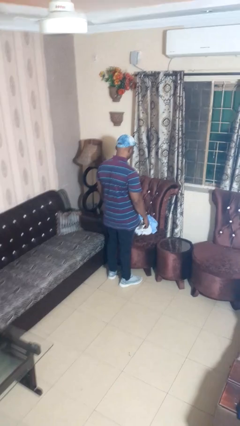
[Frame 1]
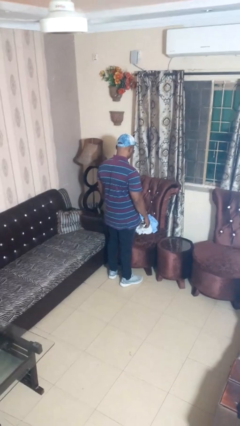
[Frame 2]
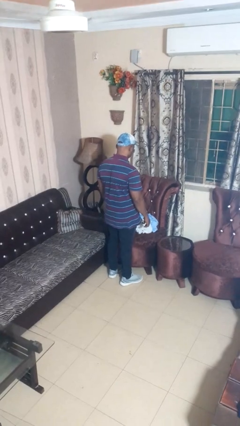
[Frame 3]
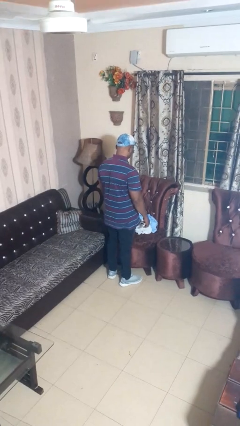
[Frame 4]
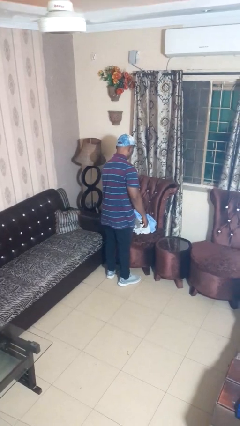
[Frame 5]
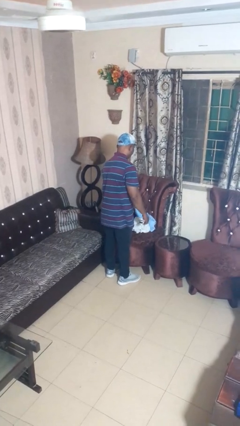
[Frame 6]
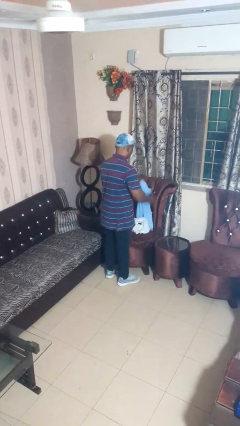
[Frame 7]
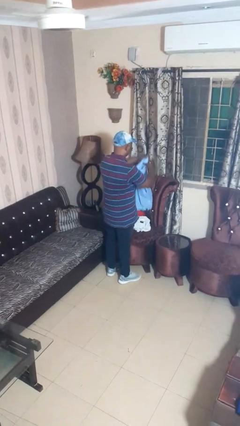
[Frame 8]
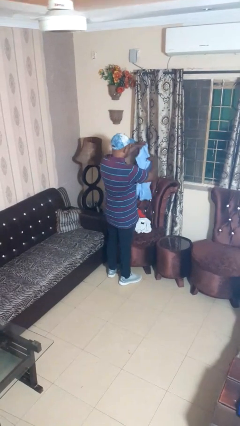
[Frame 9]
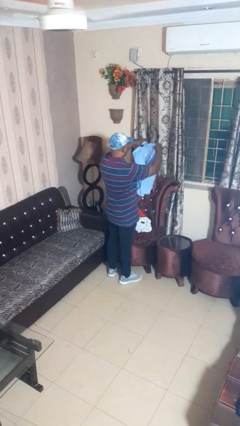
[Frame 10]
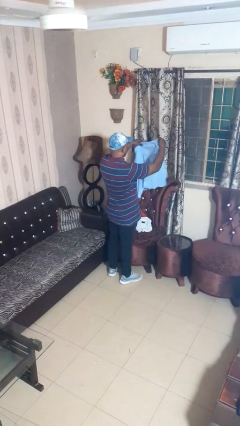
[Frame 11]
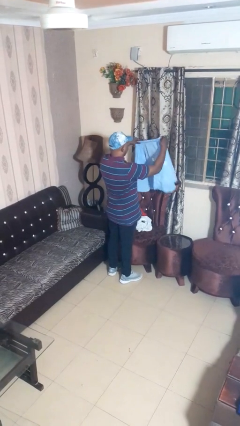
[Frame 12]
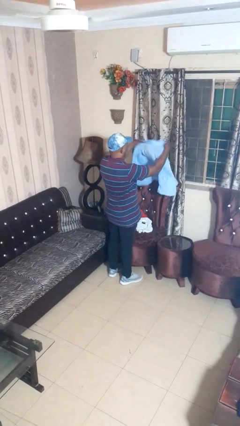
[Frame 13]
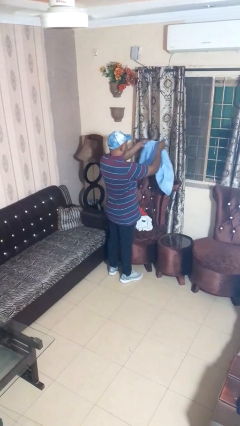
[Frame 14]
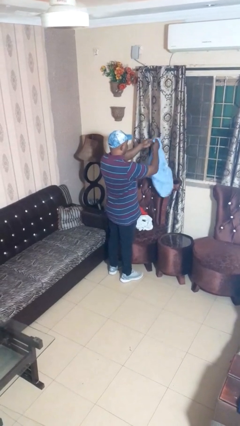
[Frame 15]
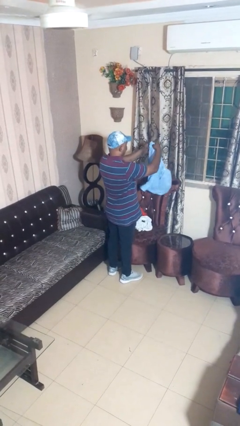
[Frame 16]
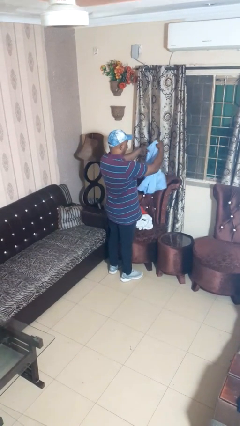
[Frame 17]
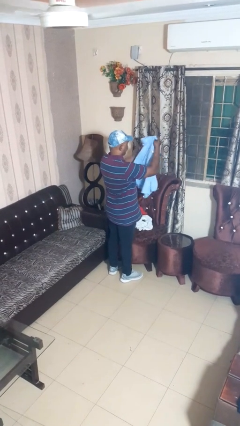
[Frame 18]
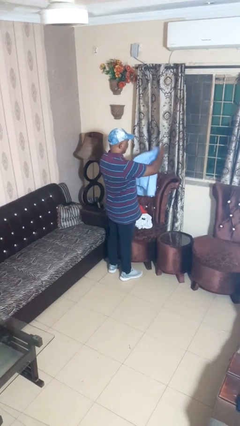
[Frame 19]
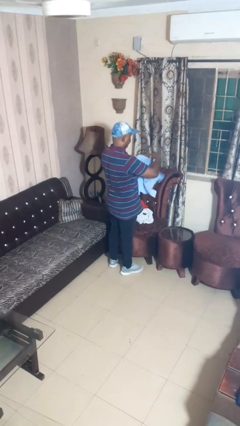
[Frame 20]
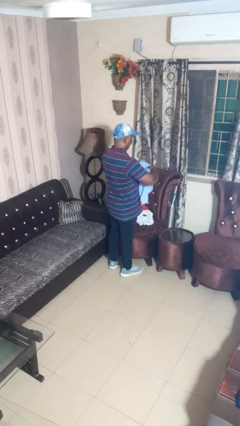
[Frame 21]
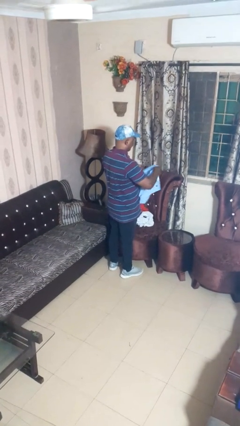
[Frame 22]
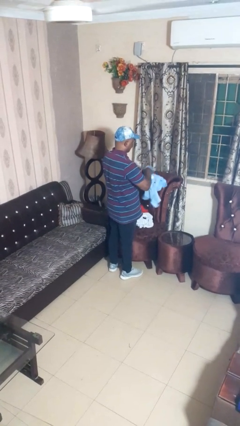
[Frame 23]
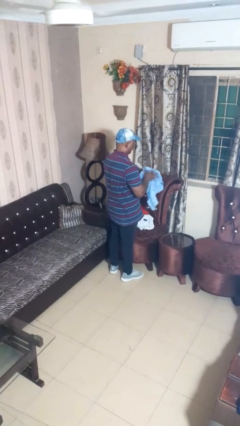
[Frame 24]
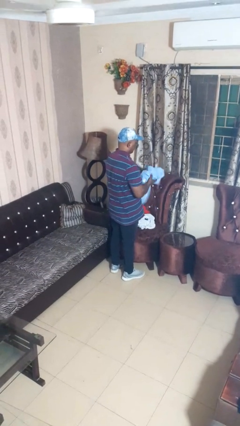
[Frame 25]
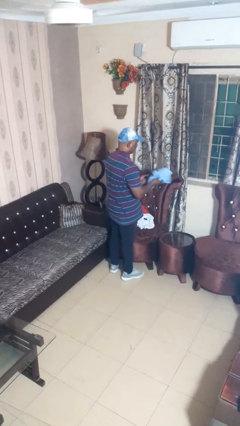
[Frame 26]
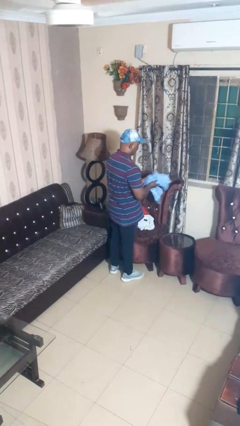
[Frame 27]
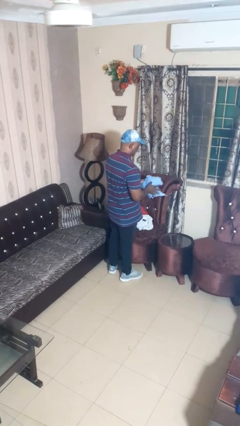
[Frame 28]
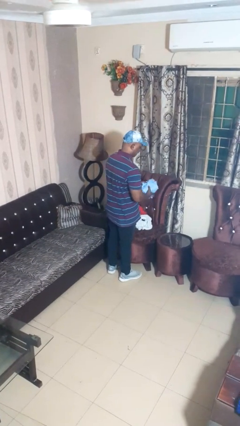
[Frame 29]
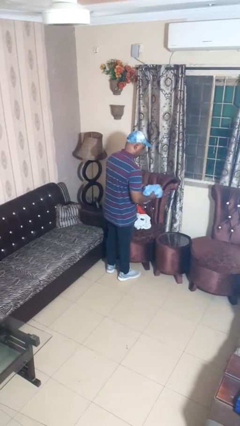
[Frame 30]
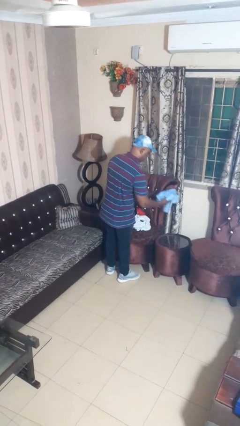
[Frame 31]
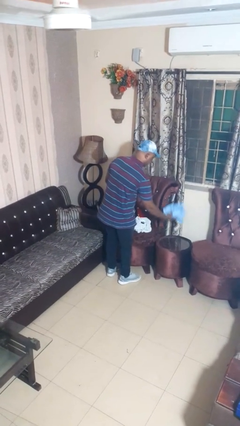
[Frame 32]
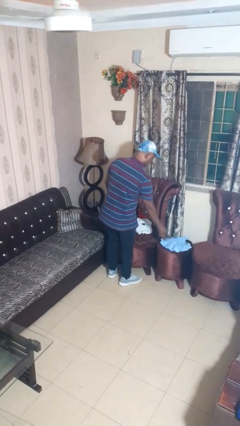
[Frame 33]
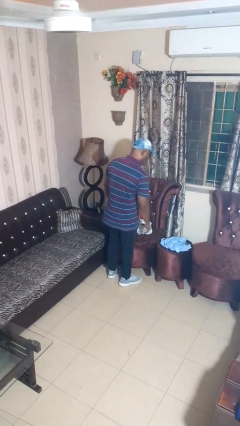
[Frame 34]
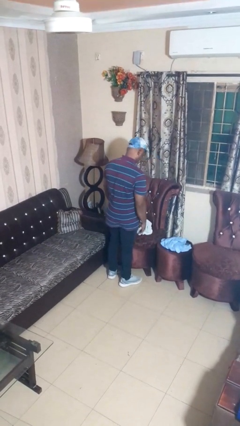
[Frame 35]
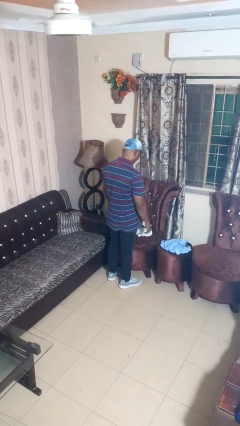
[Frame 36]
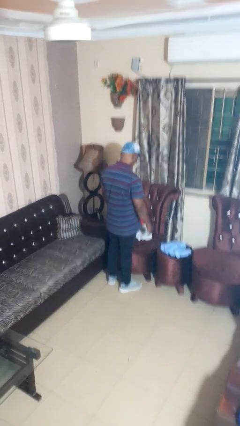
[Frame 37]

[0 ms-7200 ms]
person folds shirt

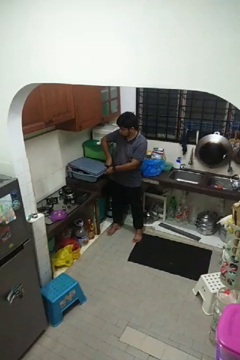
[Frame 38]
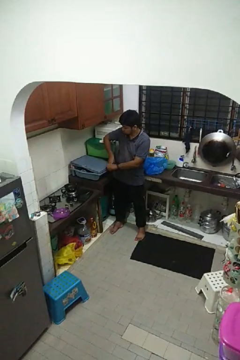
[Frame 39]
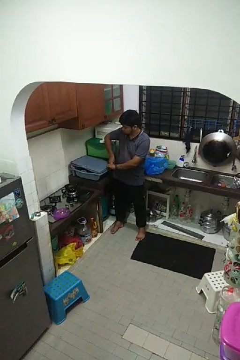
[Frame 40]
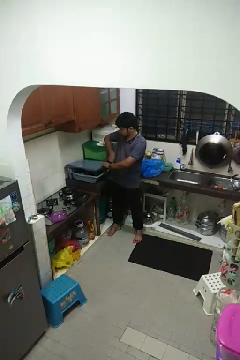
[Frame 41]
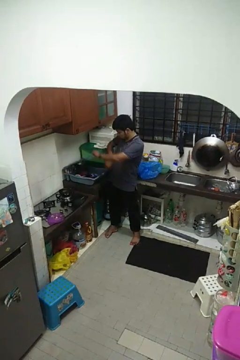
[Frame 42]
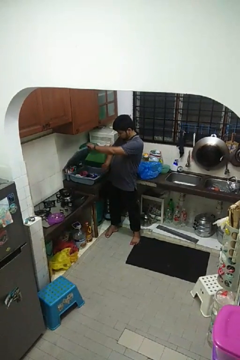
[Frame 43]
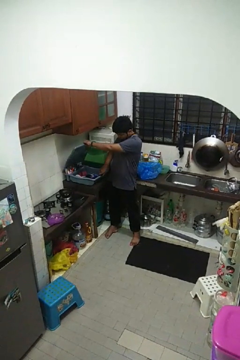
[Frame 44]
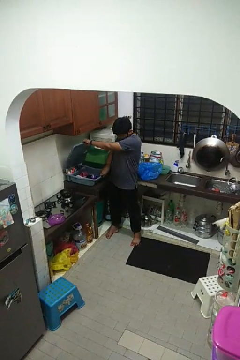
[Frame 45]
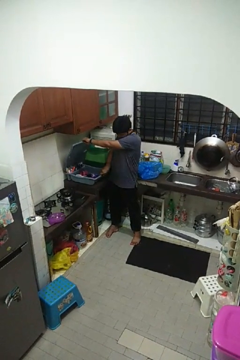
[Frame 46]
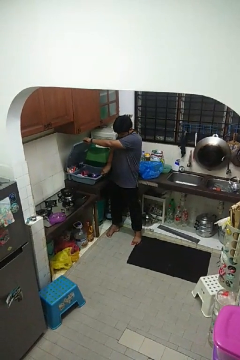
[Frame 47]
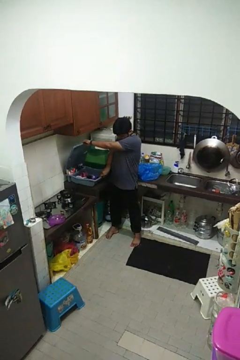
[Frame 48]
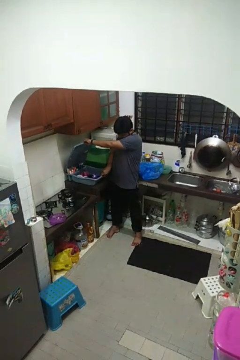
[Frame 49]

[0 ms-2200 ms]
person opens dishwasher

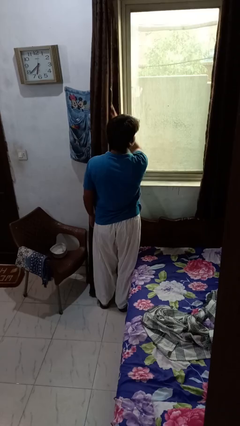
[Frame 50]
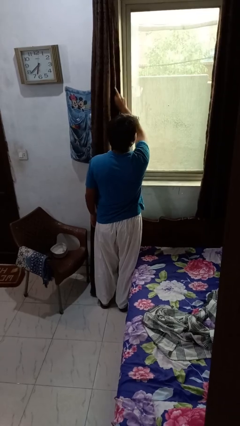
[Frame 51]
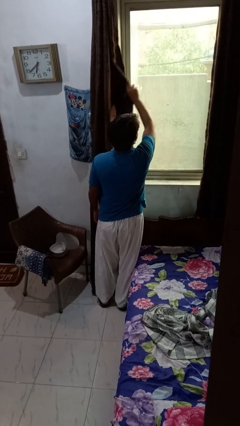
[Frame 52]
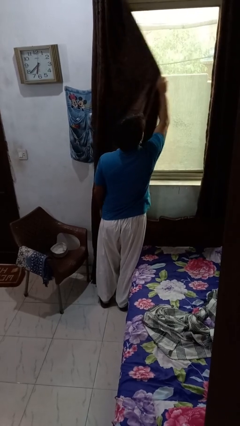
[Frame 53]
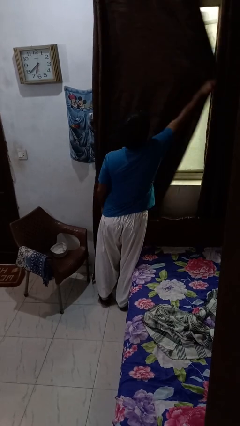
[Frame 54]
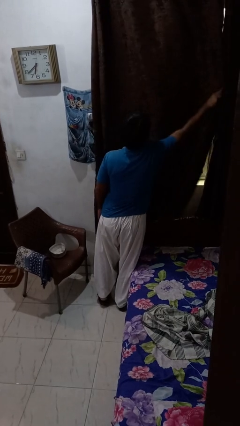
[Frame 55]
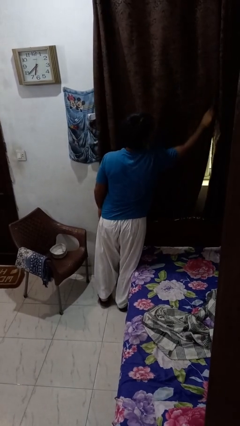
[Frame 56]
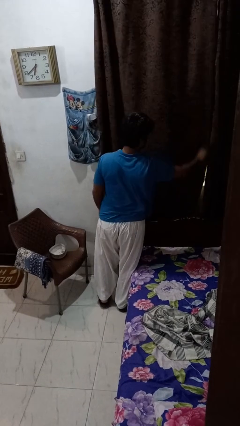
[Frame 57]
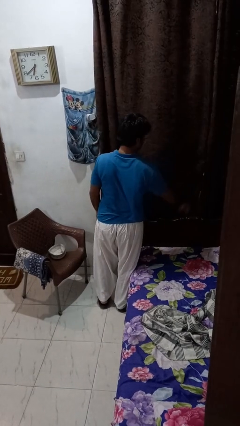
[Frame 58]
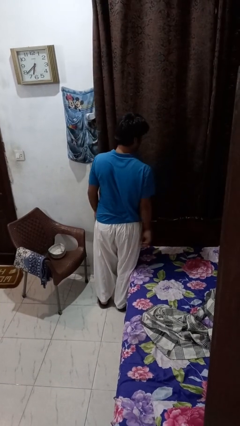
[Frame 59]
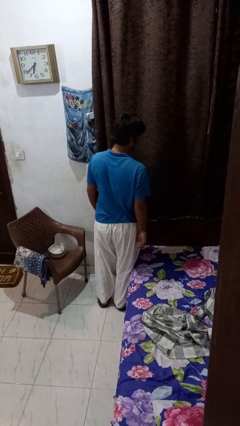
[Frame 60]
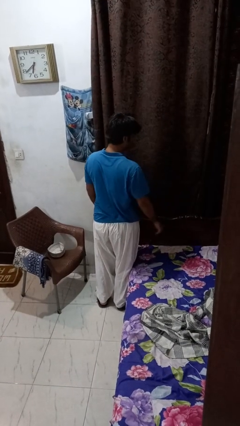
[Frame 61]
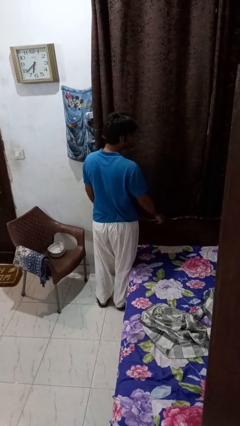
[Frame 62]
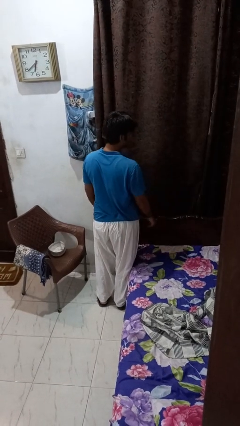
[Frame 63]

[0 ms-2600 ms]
person closes curtains

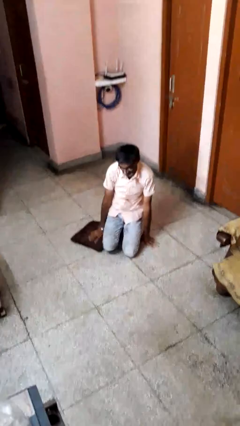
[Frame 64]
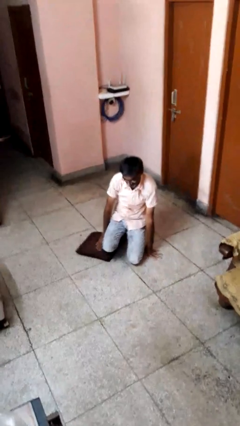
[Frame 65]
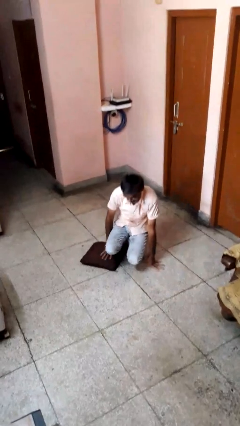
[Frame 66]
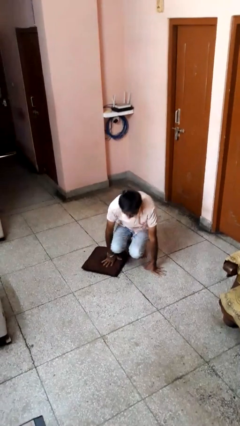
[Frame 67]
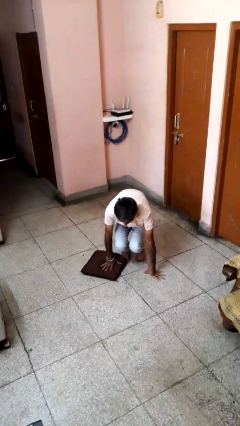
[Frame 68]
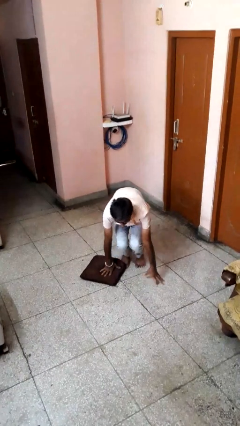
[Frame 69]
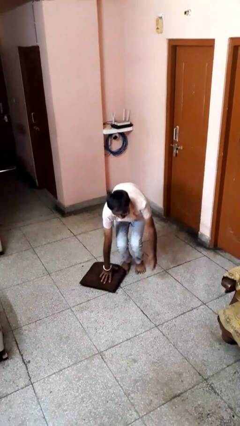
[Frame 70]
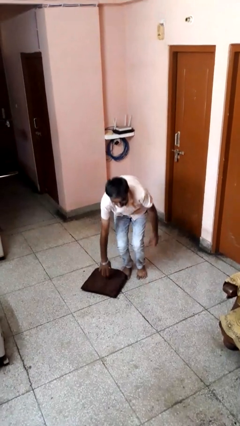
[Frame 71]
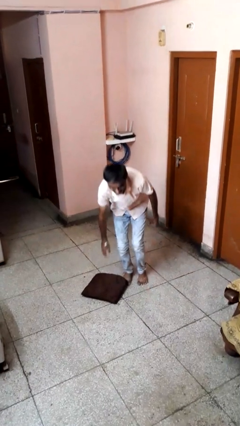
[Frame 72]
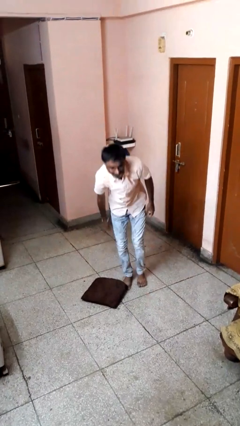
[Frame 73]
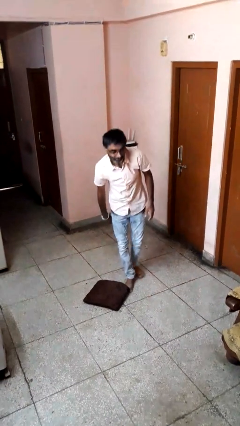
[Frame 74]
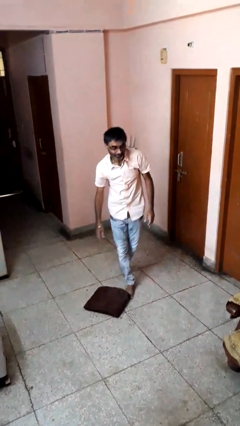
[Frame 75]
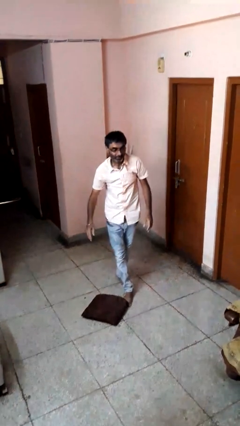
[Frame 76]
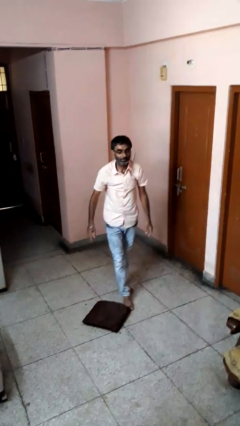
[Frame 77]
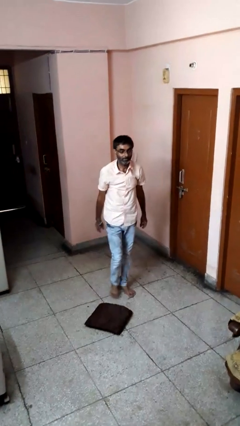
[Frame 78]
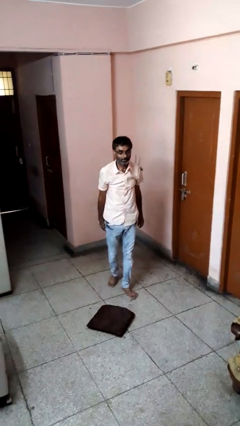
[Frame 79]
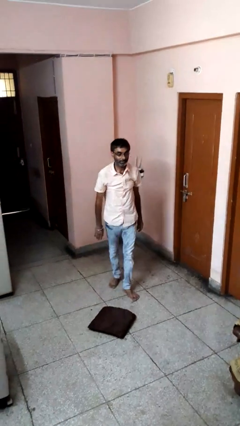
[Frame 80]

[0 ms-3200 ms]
person stands up from floor

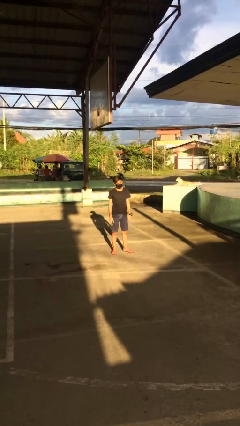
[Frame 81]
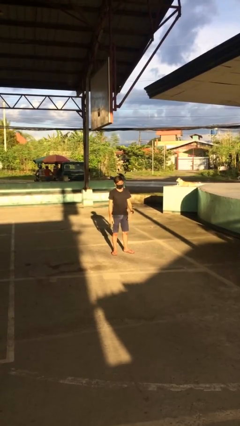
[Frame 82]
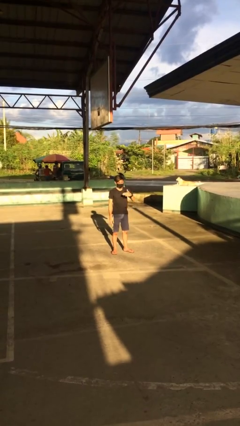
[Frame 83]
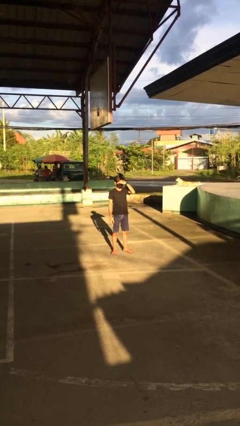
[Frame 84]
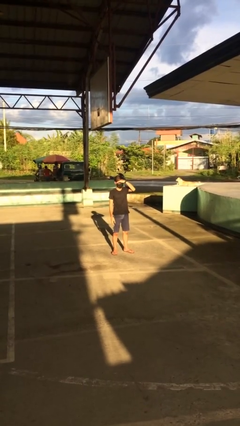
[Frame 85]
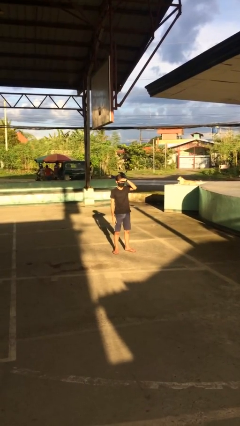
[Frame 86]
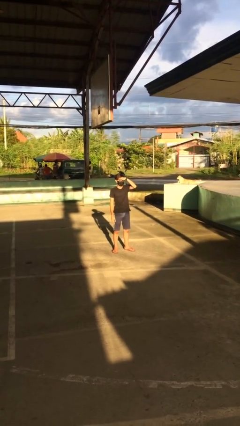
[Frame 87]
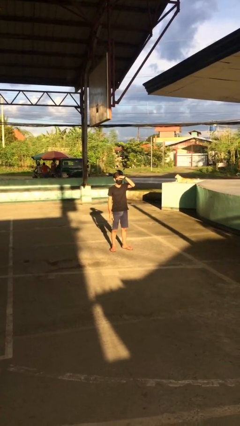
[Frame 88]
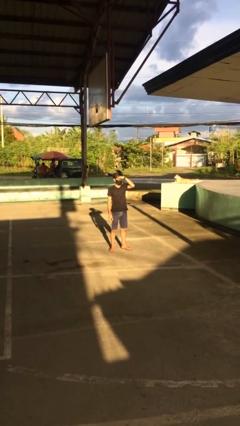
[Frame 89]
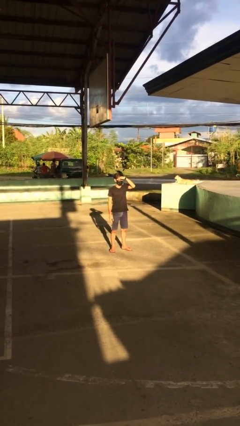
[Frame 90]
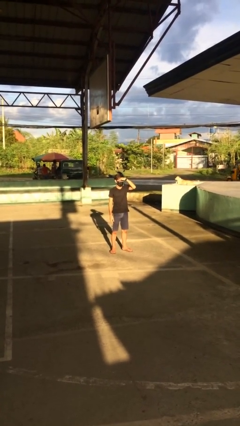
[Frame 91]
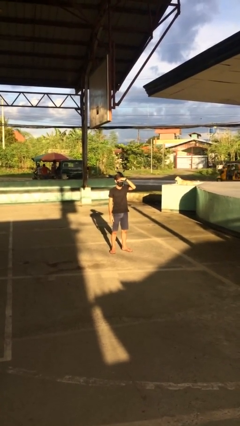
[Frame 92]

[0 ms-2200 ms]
person shades eyes
